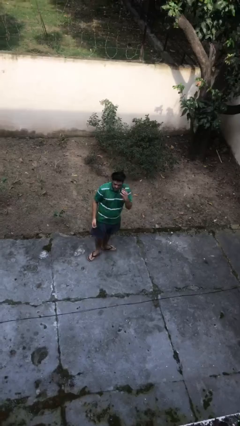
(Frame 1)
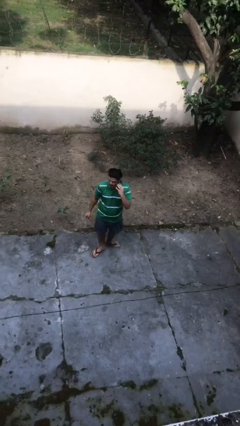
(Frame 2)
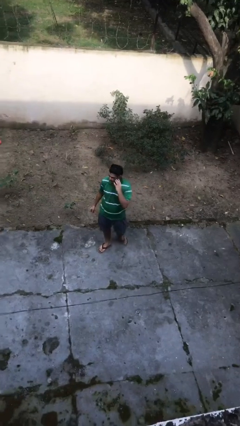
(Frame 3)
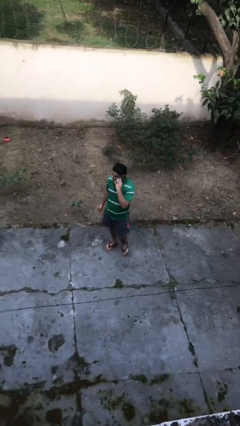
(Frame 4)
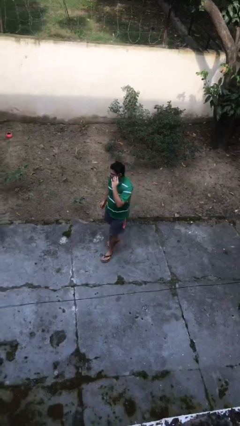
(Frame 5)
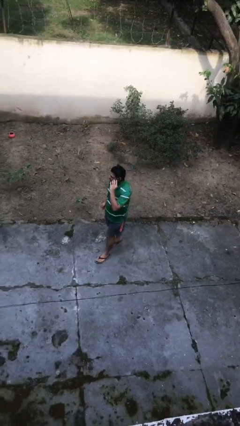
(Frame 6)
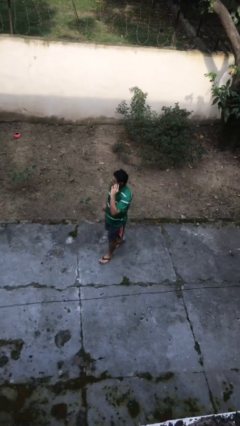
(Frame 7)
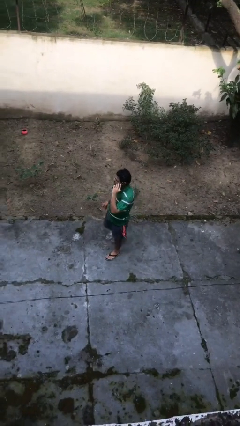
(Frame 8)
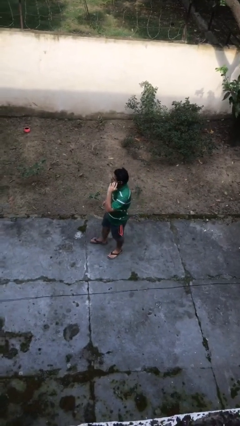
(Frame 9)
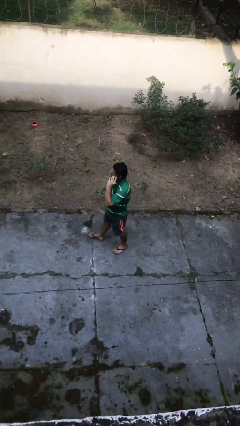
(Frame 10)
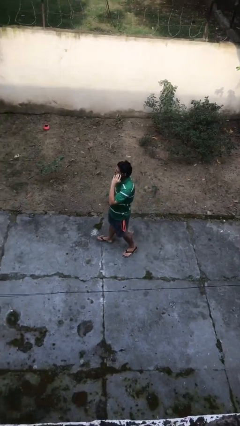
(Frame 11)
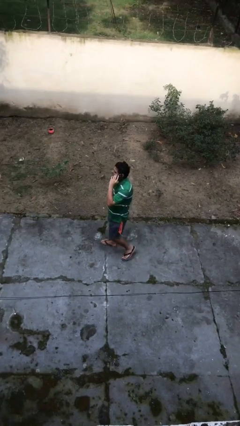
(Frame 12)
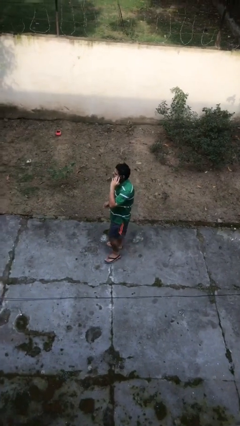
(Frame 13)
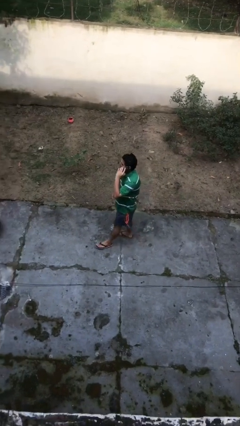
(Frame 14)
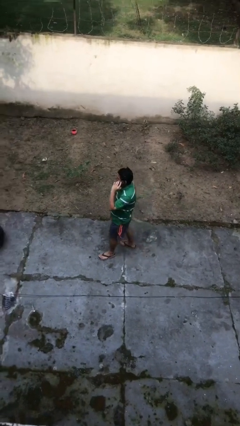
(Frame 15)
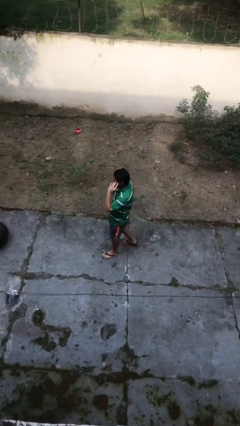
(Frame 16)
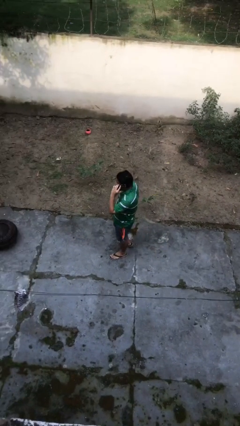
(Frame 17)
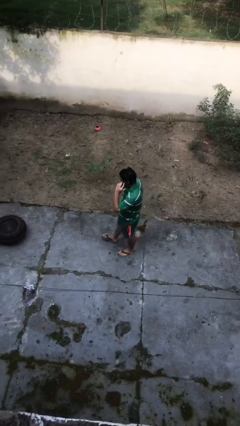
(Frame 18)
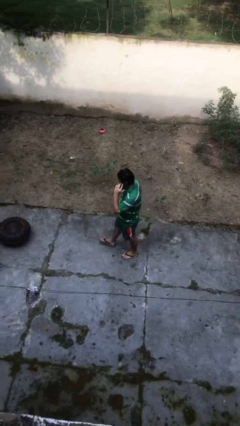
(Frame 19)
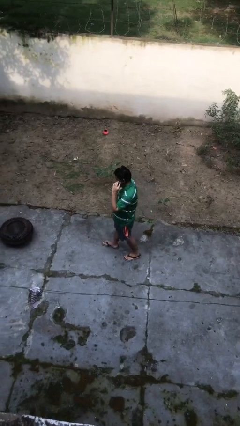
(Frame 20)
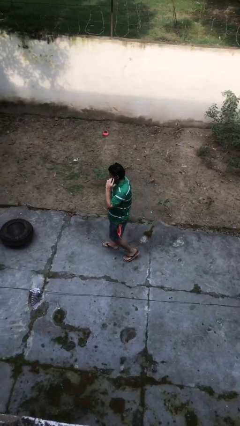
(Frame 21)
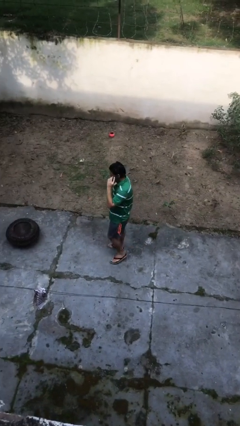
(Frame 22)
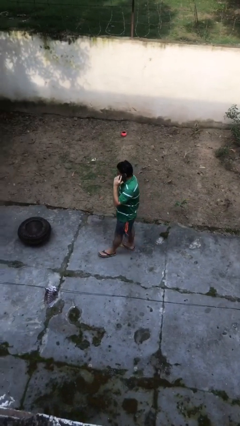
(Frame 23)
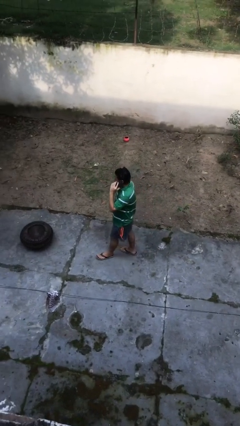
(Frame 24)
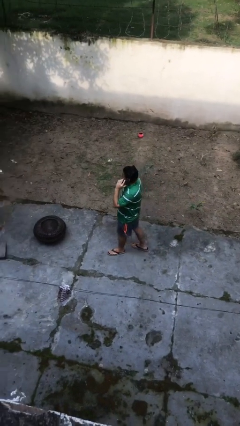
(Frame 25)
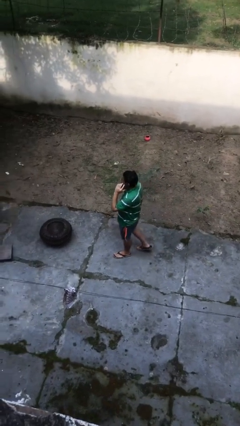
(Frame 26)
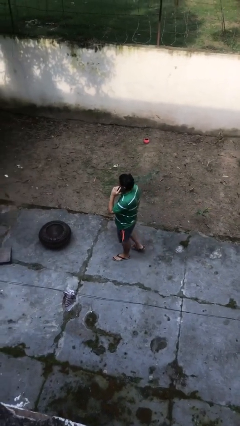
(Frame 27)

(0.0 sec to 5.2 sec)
person talks on phone

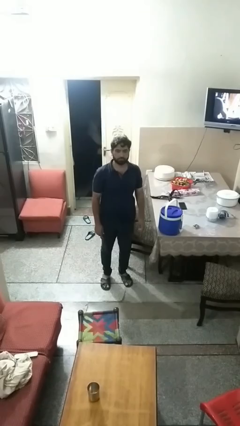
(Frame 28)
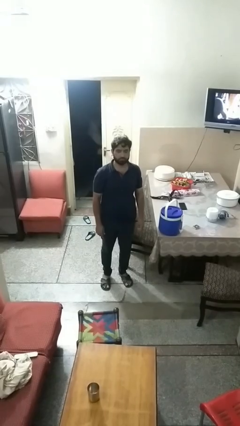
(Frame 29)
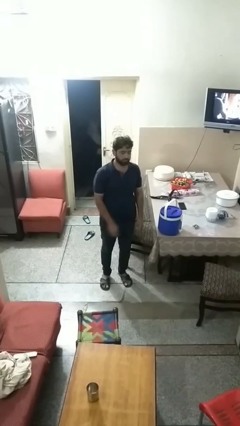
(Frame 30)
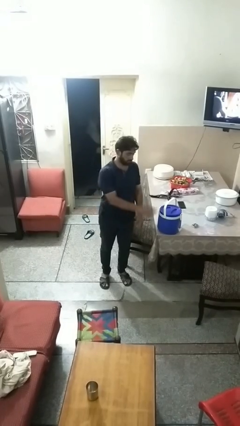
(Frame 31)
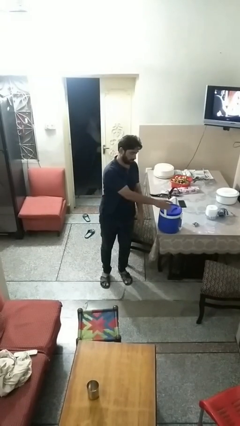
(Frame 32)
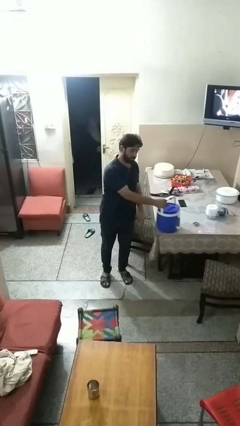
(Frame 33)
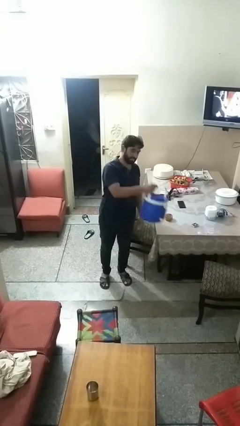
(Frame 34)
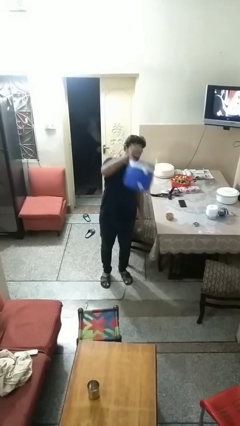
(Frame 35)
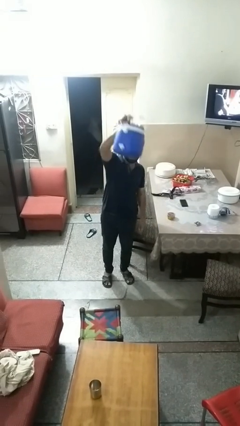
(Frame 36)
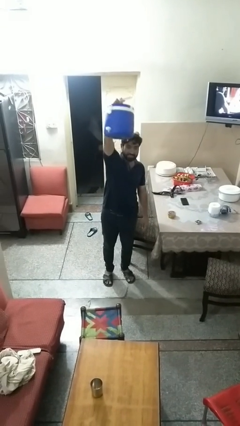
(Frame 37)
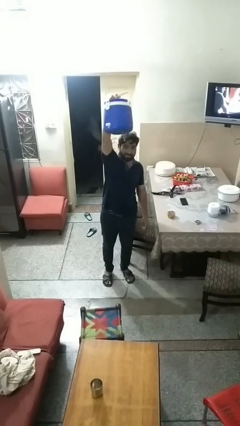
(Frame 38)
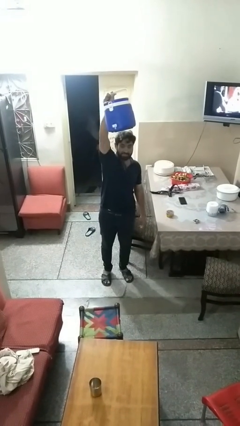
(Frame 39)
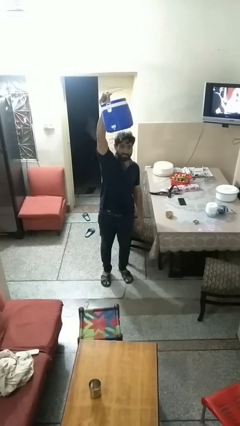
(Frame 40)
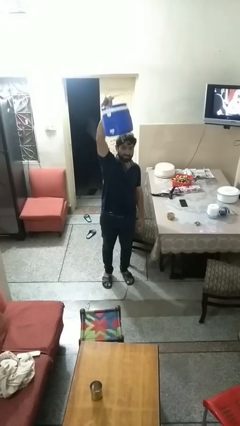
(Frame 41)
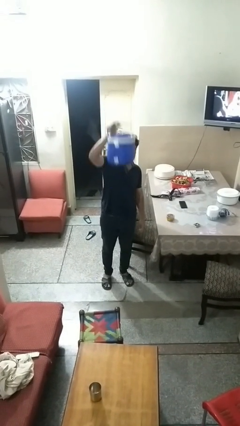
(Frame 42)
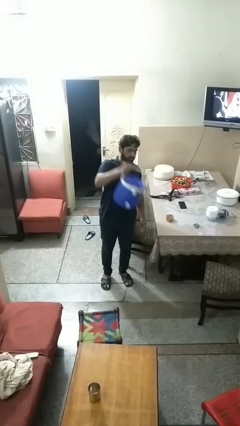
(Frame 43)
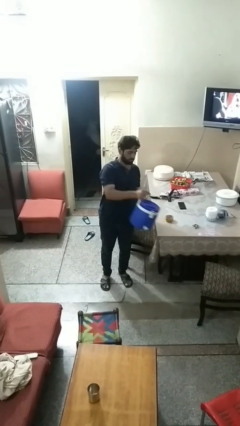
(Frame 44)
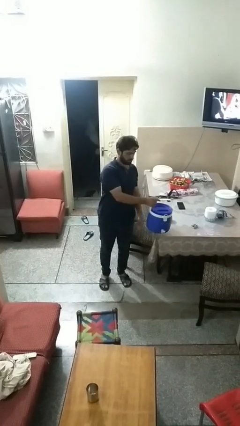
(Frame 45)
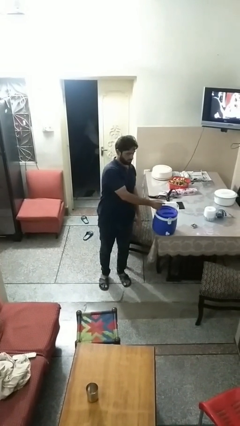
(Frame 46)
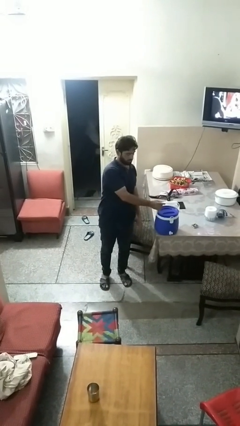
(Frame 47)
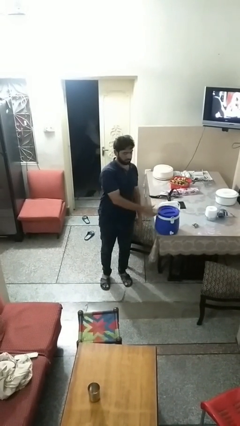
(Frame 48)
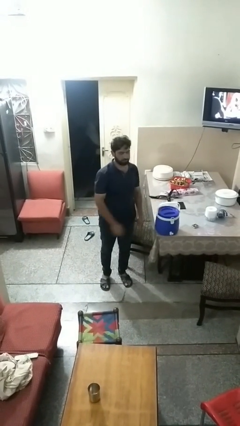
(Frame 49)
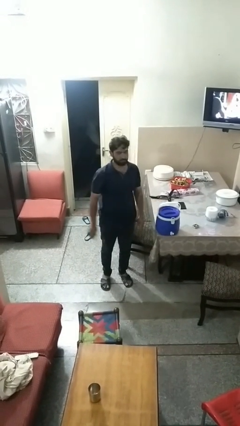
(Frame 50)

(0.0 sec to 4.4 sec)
person holds object above head

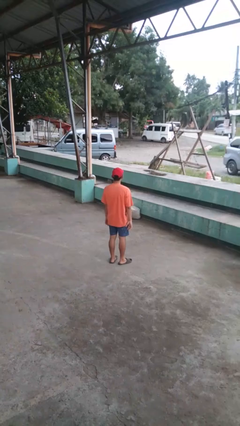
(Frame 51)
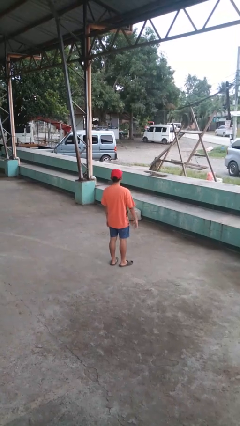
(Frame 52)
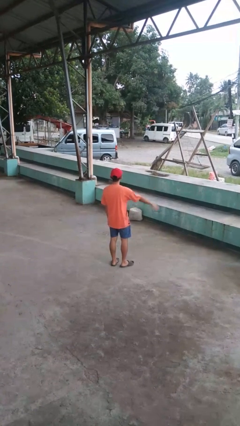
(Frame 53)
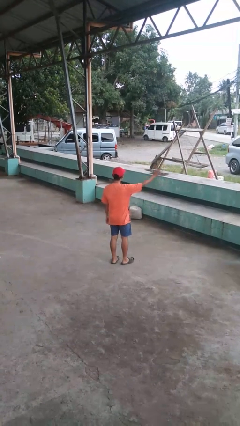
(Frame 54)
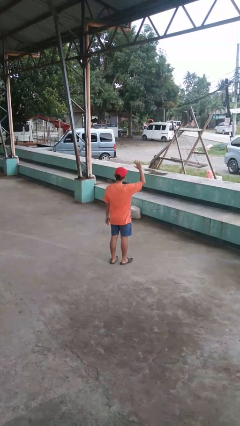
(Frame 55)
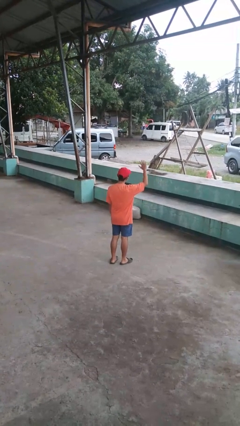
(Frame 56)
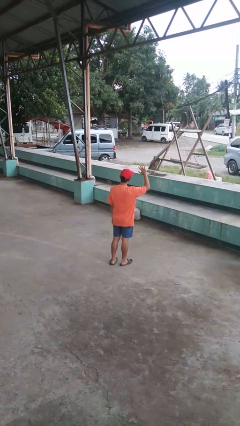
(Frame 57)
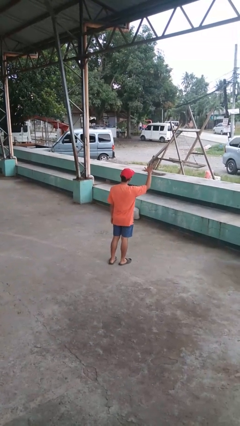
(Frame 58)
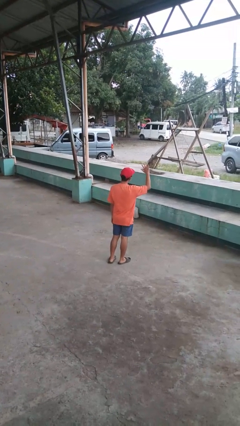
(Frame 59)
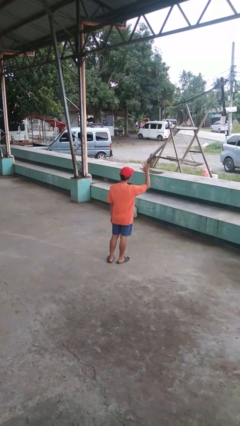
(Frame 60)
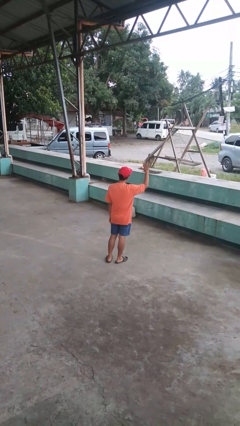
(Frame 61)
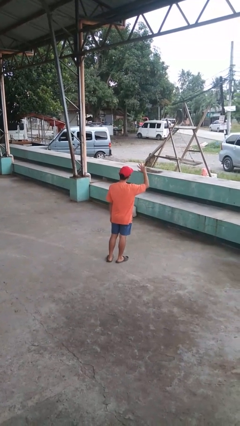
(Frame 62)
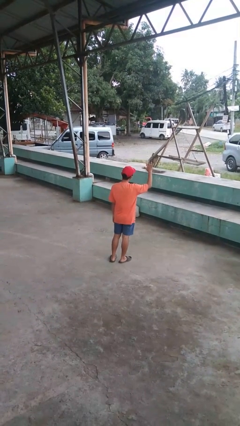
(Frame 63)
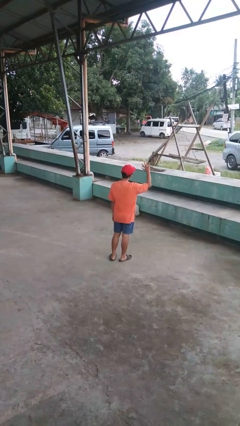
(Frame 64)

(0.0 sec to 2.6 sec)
person waves at person

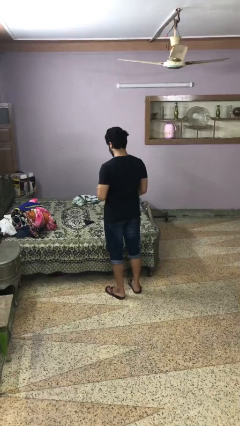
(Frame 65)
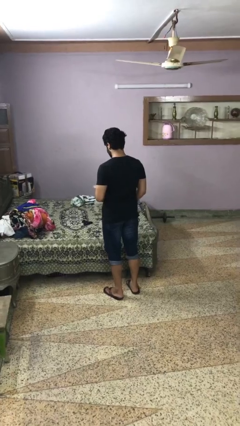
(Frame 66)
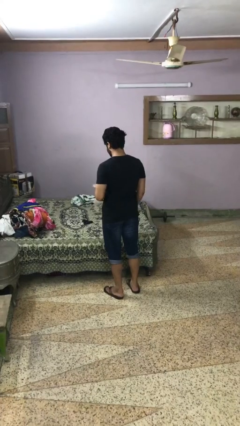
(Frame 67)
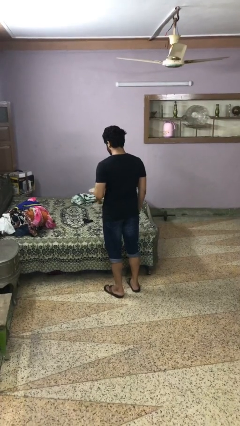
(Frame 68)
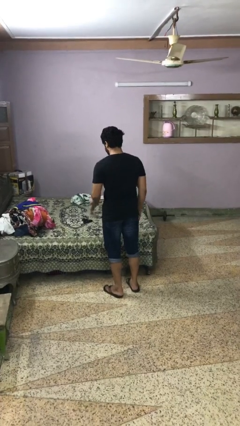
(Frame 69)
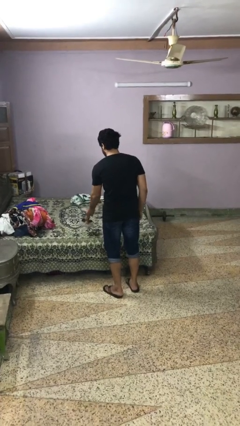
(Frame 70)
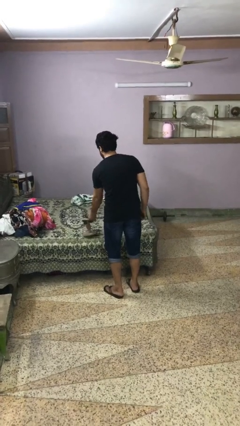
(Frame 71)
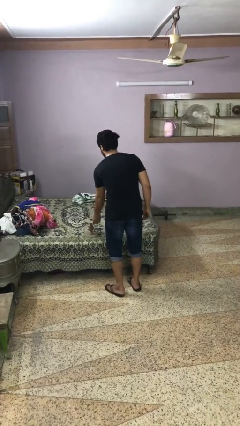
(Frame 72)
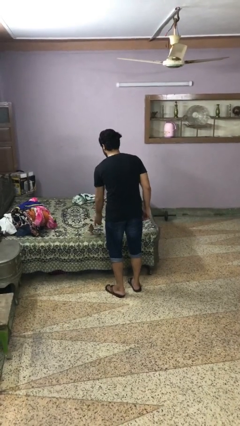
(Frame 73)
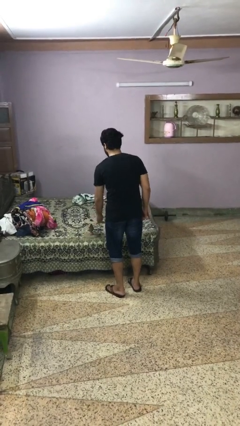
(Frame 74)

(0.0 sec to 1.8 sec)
person puts down object on bed

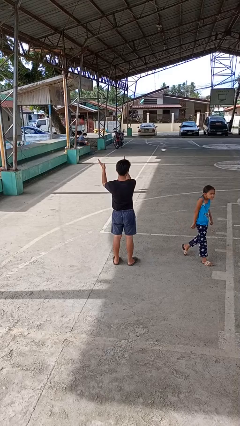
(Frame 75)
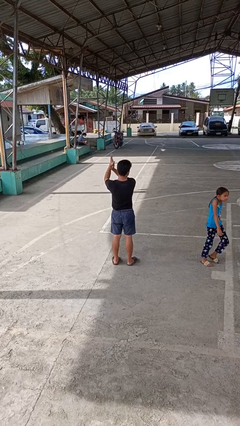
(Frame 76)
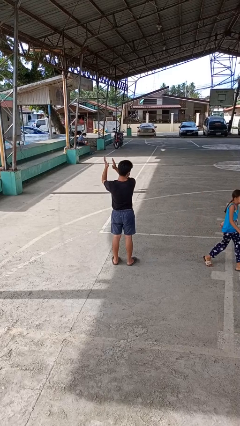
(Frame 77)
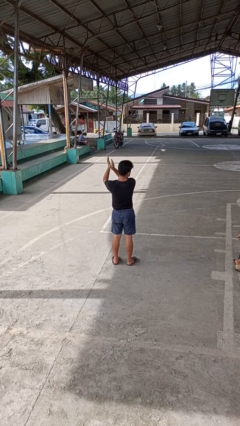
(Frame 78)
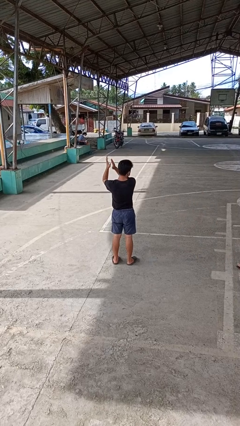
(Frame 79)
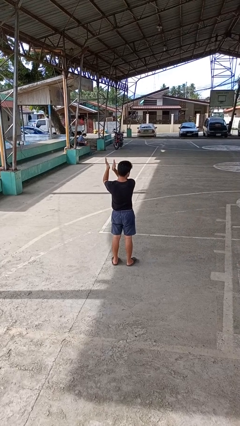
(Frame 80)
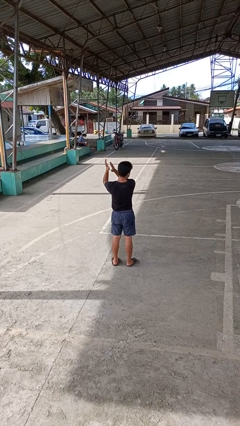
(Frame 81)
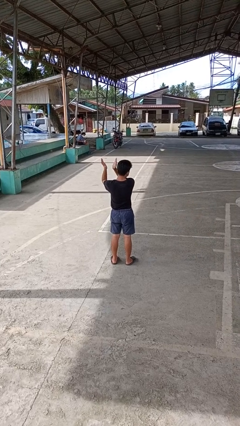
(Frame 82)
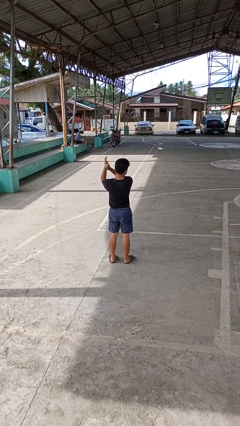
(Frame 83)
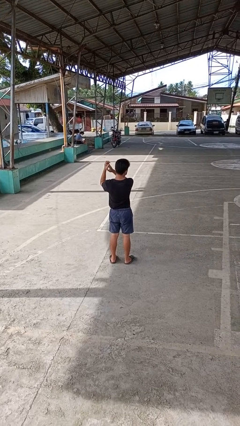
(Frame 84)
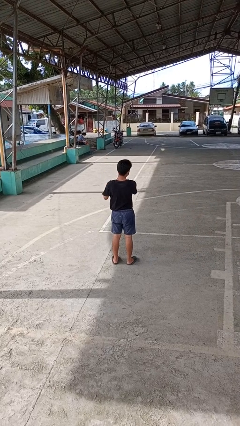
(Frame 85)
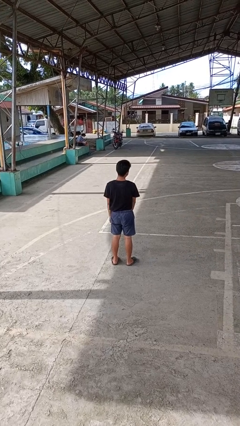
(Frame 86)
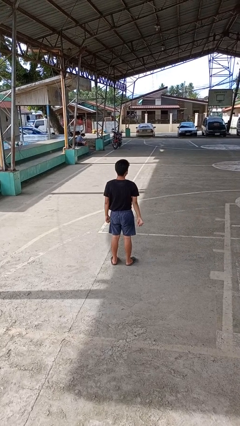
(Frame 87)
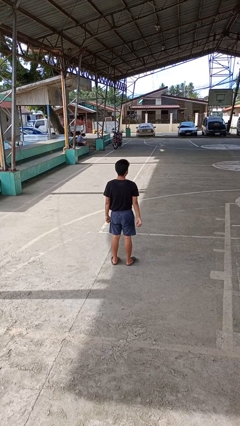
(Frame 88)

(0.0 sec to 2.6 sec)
person claps hands

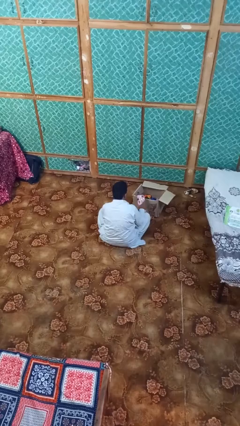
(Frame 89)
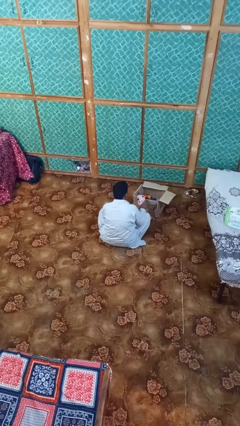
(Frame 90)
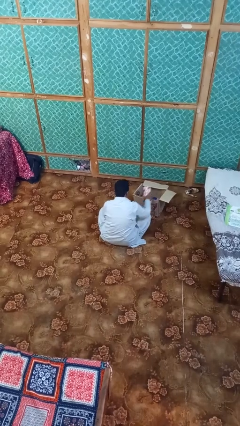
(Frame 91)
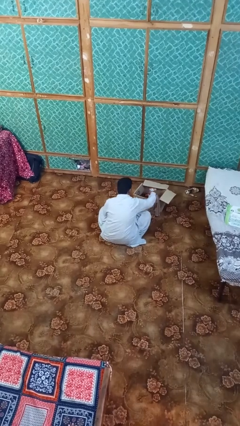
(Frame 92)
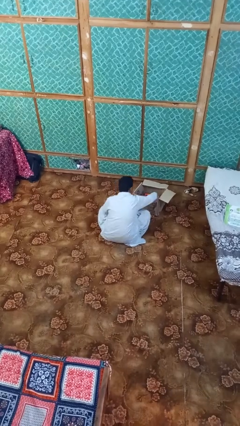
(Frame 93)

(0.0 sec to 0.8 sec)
person puts object into box

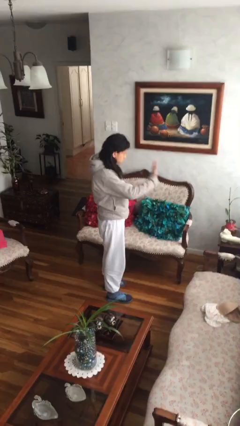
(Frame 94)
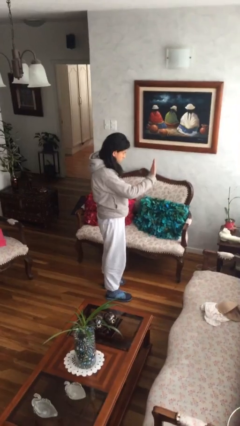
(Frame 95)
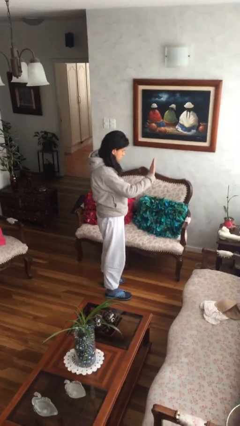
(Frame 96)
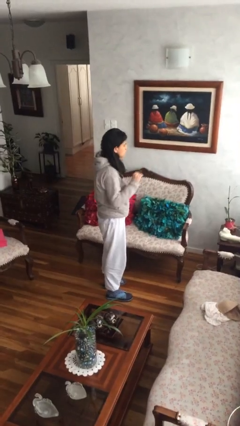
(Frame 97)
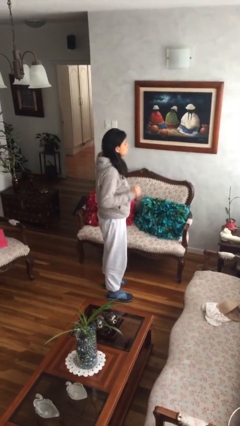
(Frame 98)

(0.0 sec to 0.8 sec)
person gestures stop
